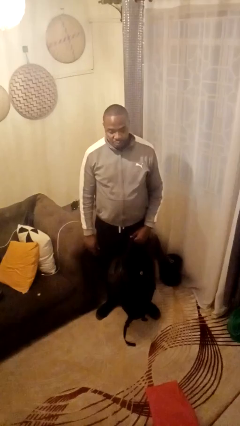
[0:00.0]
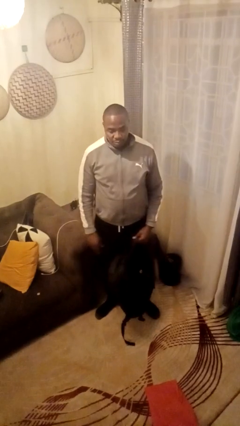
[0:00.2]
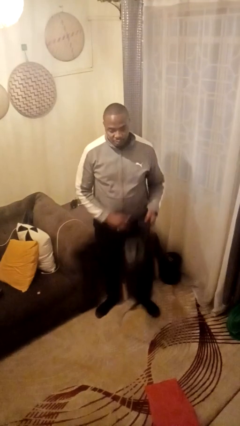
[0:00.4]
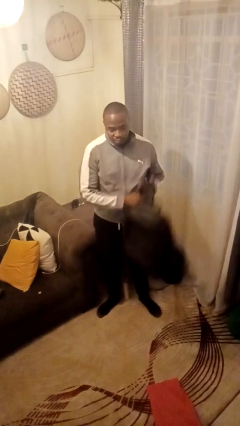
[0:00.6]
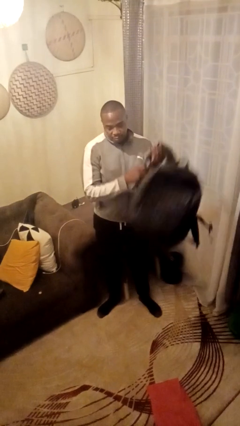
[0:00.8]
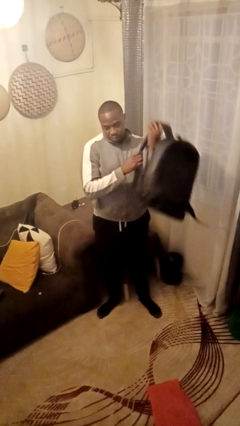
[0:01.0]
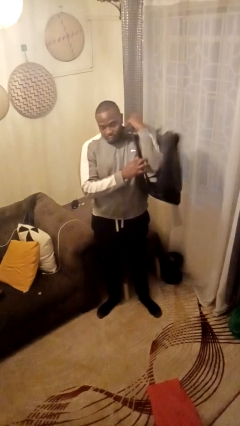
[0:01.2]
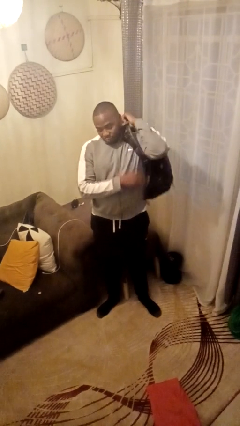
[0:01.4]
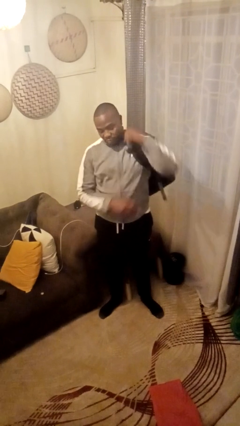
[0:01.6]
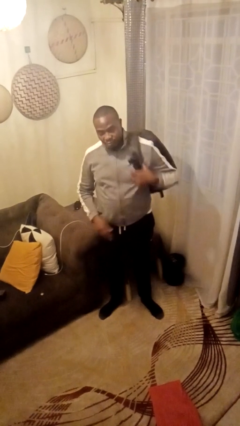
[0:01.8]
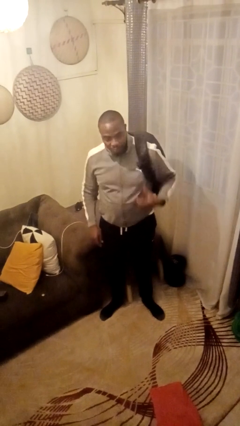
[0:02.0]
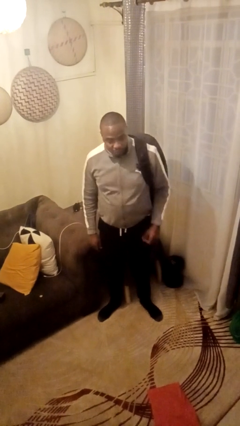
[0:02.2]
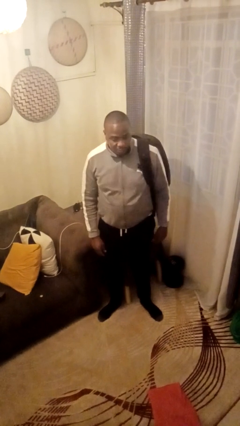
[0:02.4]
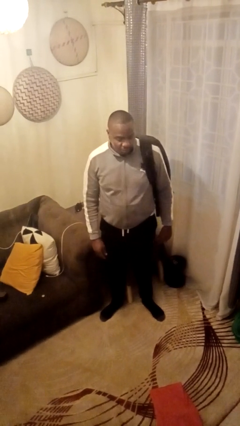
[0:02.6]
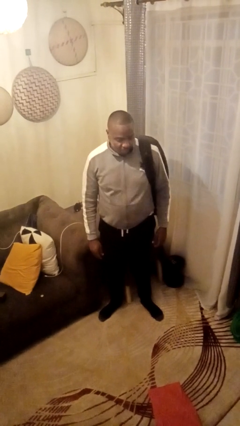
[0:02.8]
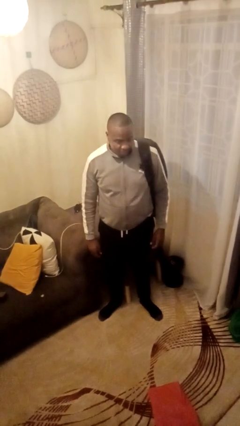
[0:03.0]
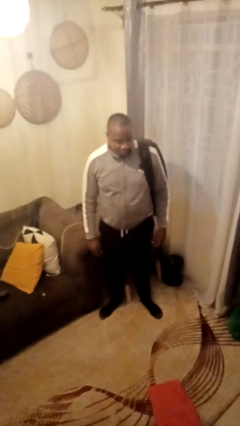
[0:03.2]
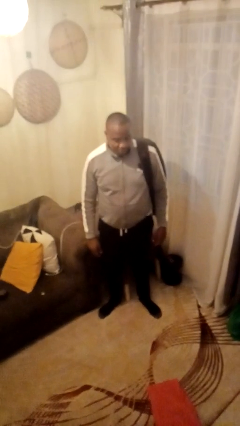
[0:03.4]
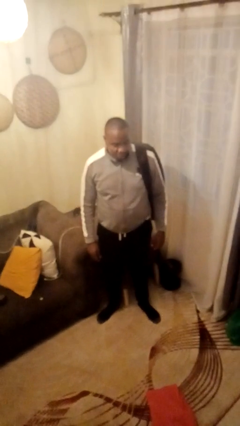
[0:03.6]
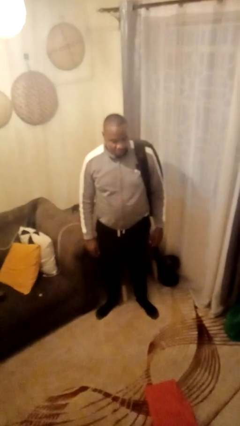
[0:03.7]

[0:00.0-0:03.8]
person puts on backpack

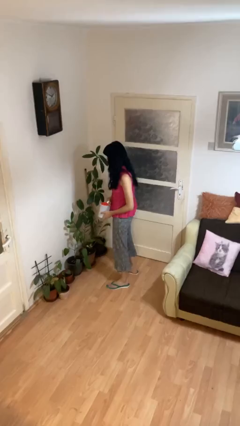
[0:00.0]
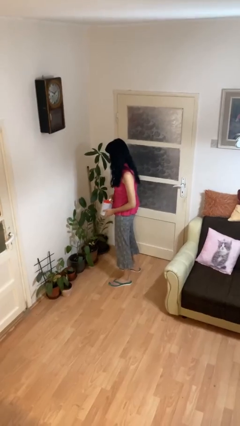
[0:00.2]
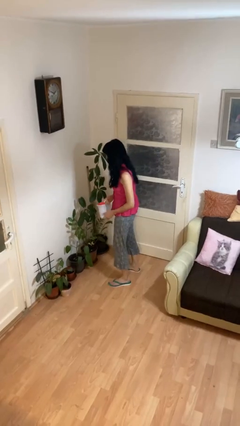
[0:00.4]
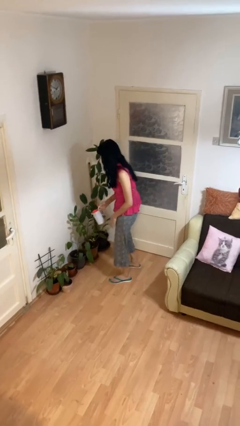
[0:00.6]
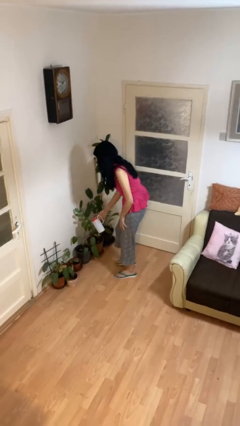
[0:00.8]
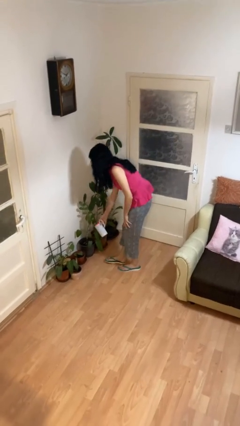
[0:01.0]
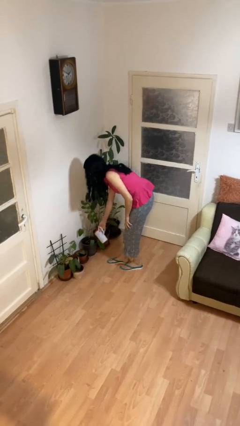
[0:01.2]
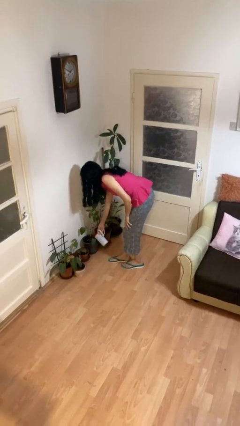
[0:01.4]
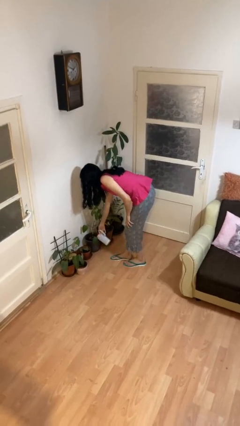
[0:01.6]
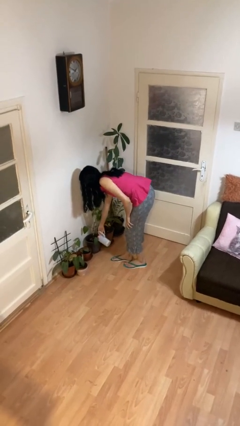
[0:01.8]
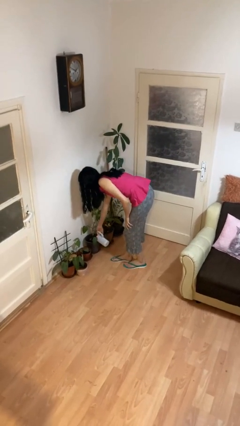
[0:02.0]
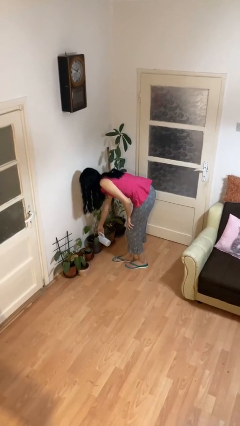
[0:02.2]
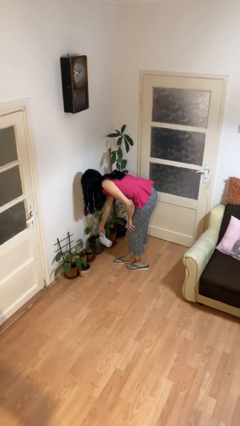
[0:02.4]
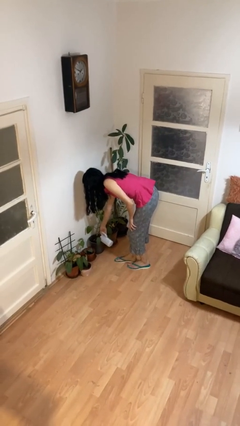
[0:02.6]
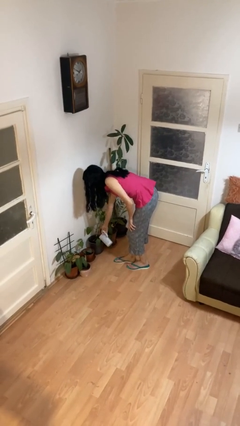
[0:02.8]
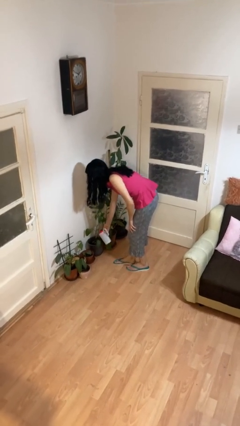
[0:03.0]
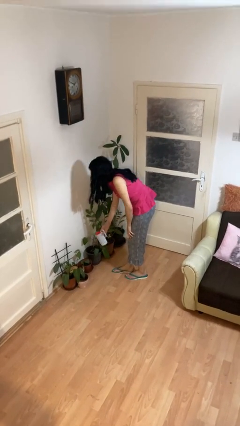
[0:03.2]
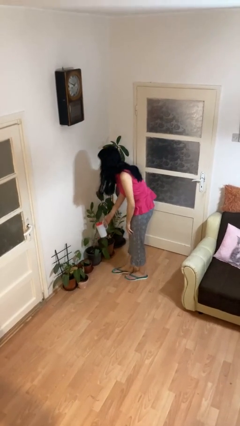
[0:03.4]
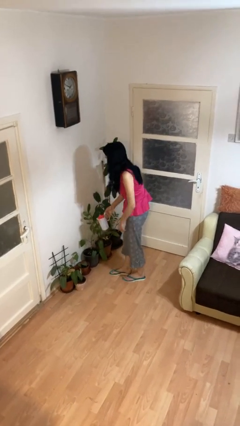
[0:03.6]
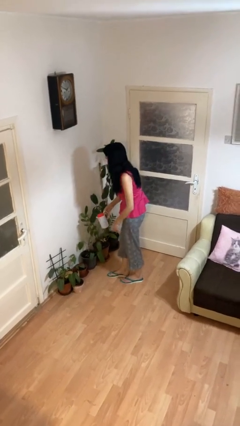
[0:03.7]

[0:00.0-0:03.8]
person waters houseplant

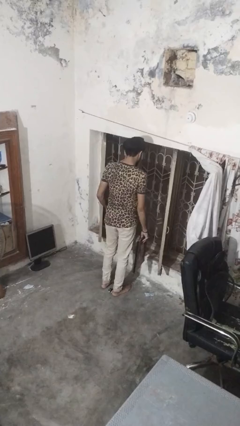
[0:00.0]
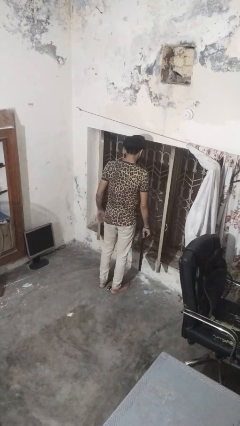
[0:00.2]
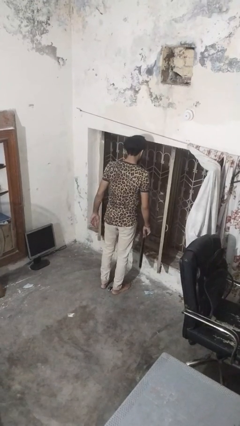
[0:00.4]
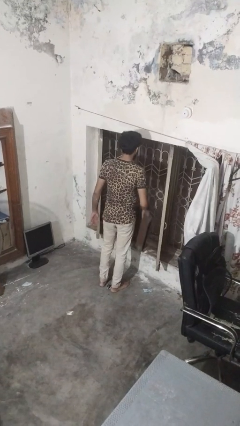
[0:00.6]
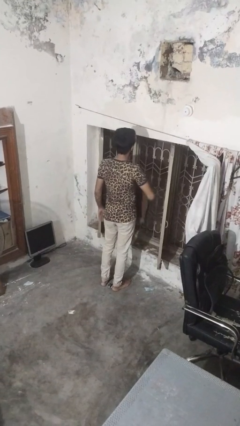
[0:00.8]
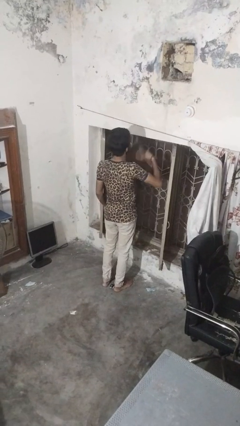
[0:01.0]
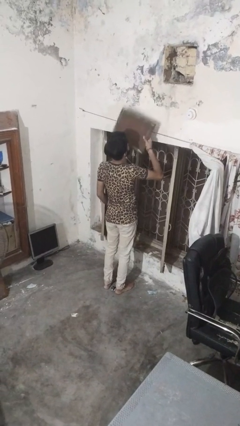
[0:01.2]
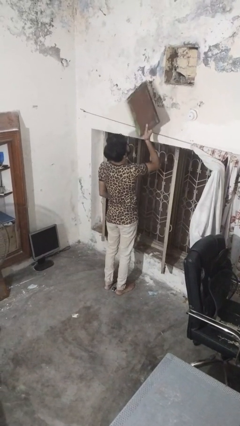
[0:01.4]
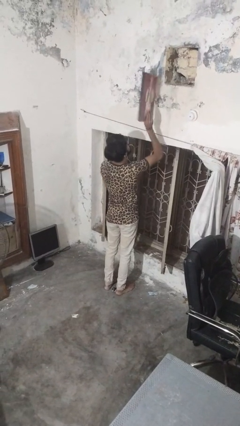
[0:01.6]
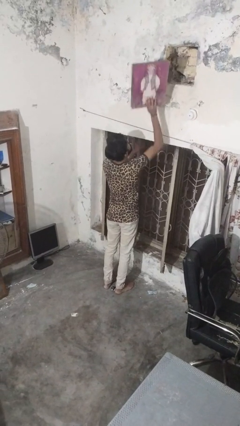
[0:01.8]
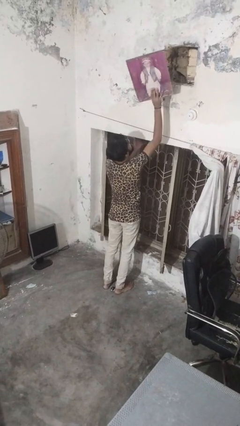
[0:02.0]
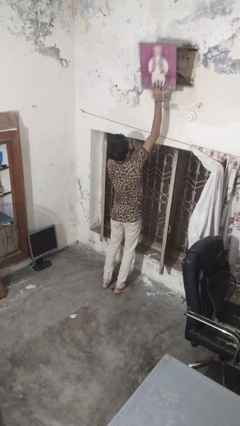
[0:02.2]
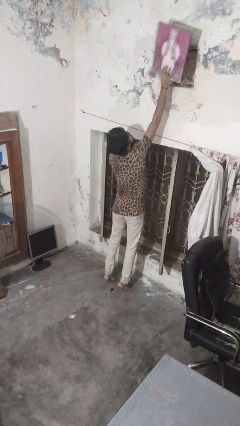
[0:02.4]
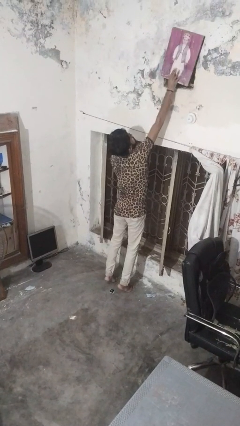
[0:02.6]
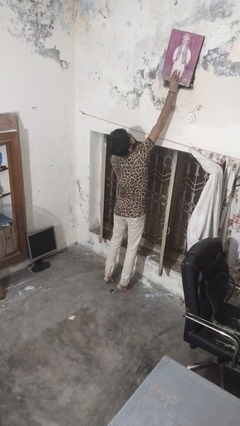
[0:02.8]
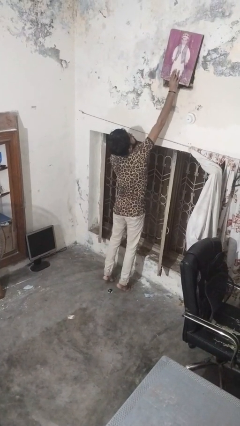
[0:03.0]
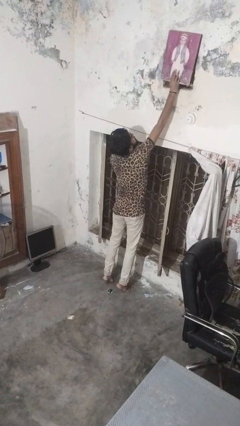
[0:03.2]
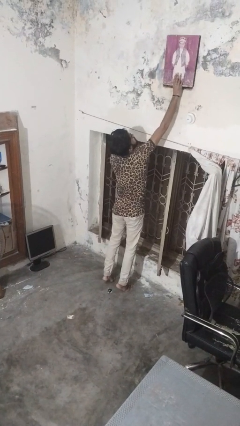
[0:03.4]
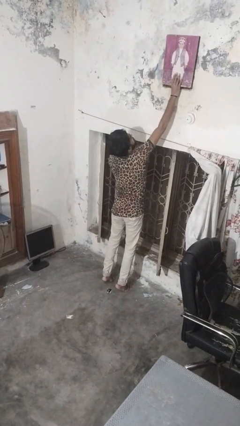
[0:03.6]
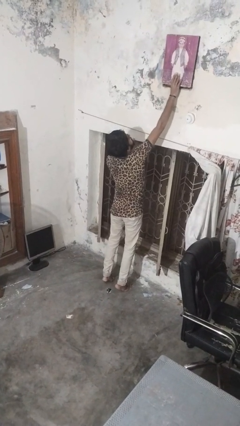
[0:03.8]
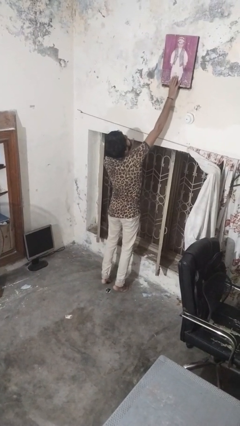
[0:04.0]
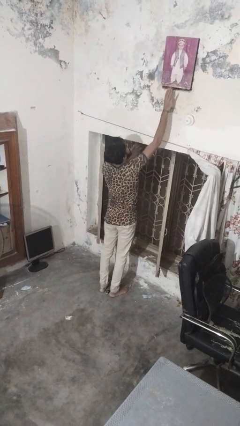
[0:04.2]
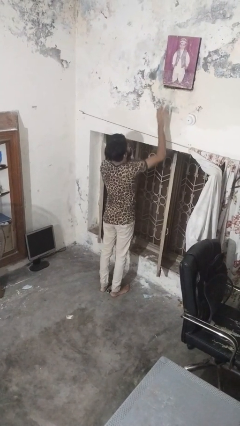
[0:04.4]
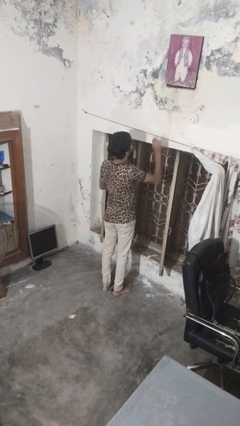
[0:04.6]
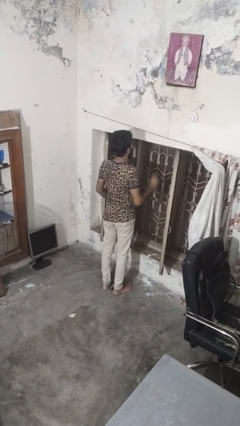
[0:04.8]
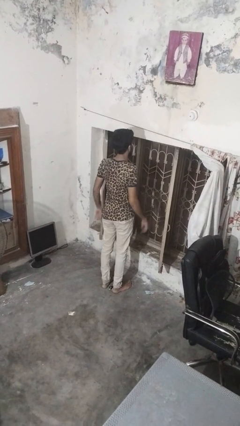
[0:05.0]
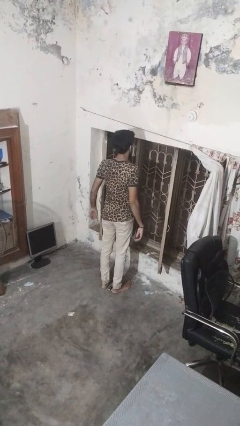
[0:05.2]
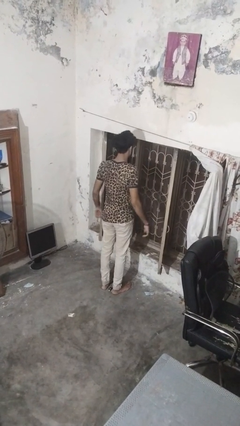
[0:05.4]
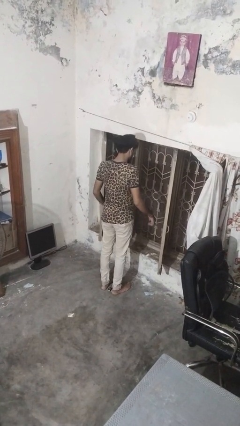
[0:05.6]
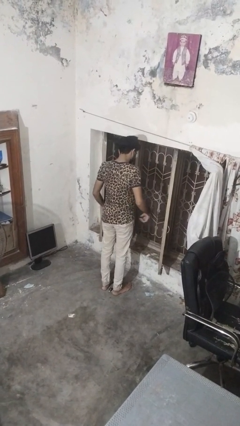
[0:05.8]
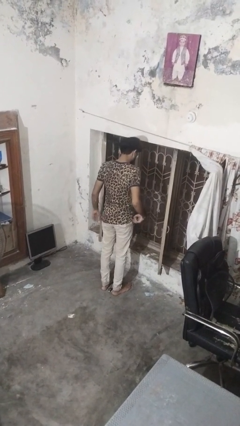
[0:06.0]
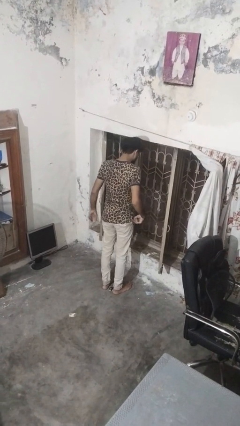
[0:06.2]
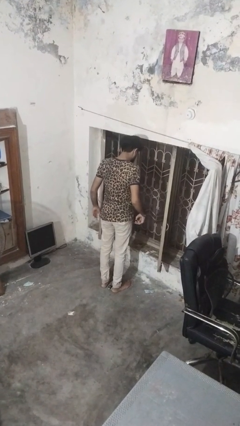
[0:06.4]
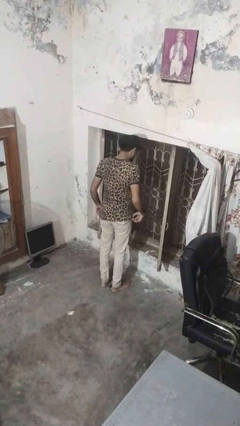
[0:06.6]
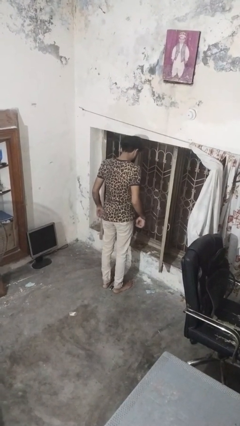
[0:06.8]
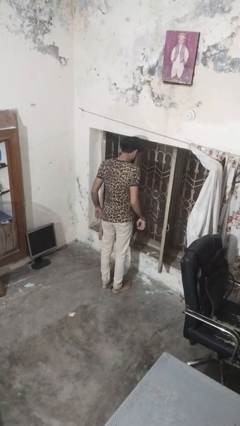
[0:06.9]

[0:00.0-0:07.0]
person puts up picture frame

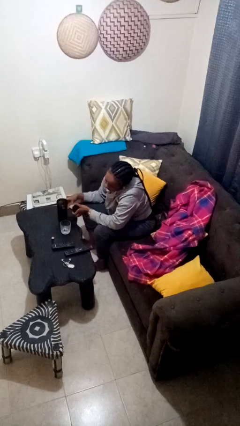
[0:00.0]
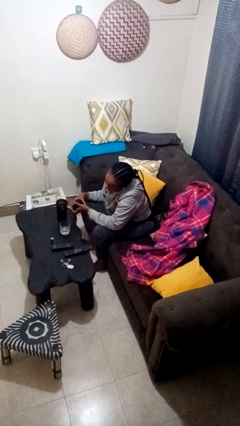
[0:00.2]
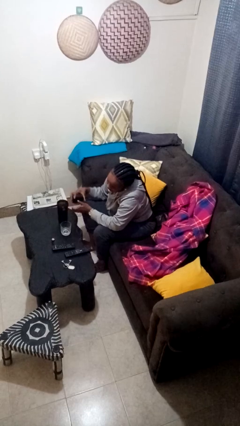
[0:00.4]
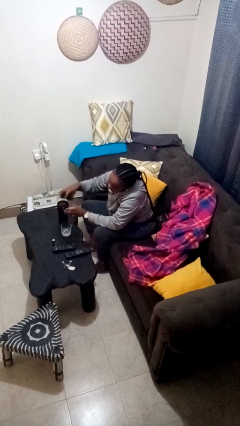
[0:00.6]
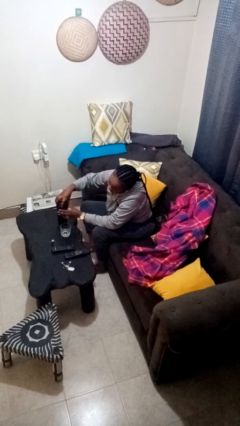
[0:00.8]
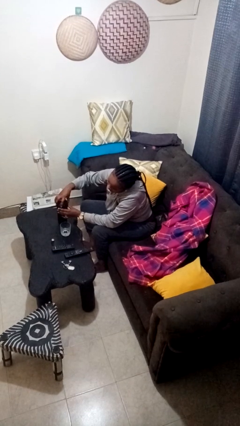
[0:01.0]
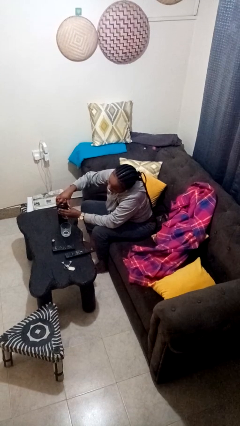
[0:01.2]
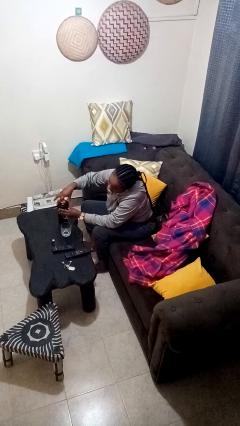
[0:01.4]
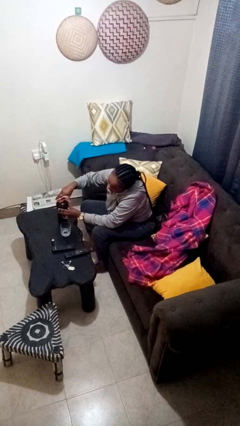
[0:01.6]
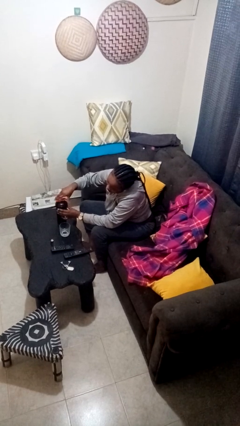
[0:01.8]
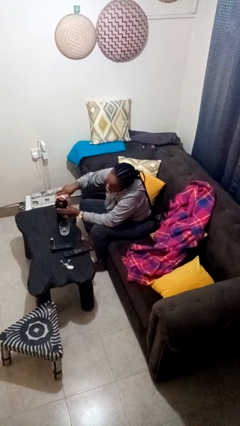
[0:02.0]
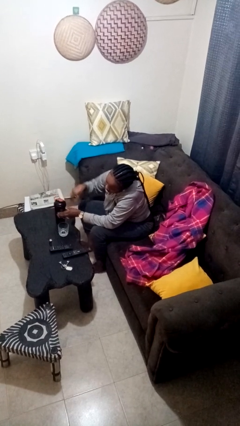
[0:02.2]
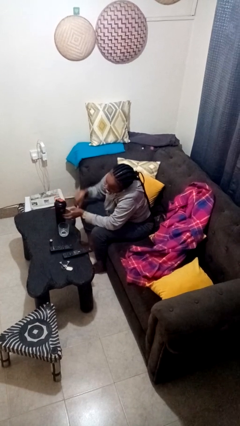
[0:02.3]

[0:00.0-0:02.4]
person screws lid to bottle

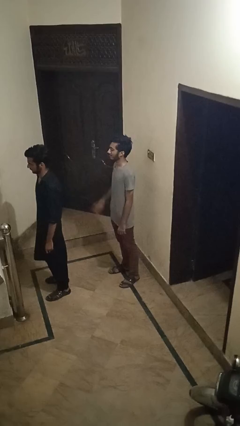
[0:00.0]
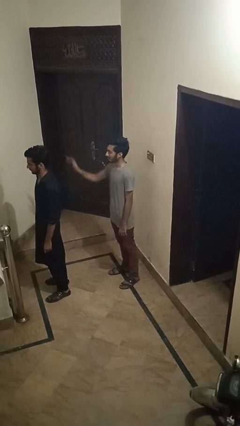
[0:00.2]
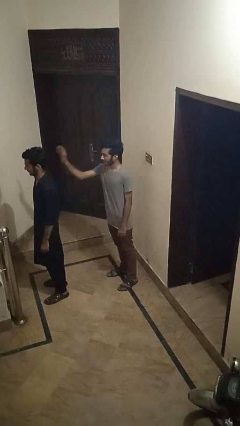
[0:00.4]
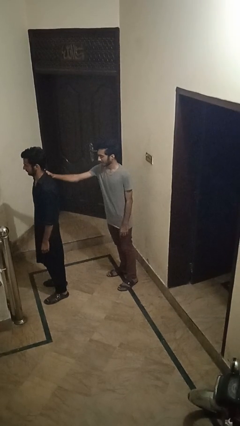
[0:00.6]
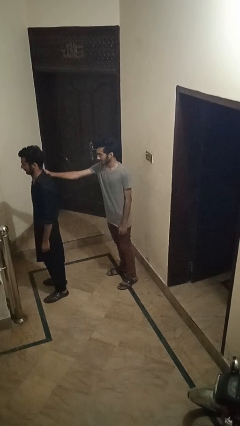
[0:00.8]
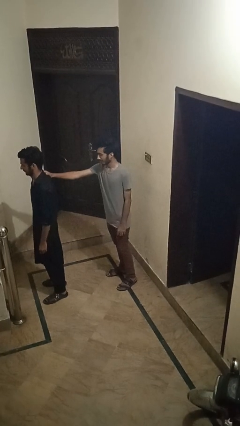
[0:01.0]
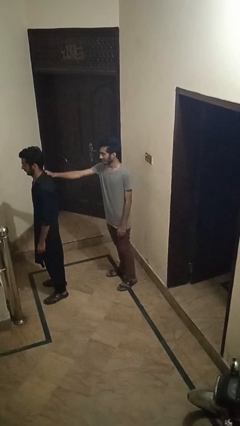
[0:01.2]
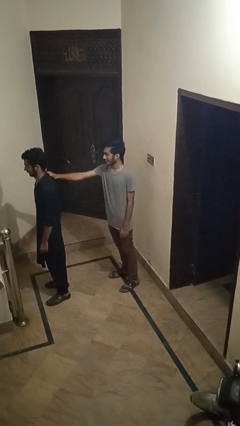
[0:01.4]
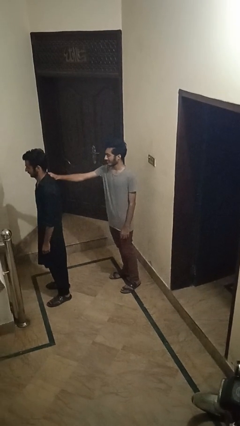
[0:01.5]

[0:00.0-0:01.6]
person grabs person by shoulder
